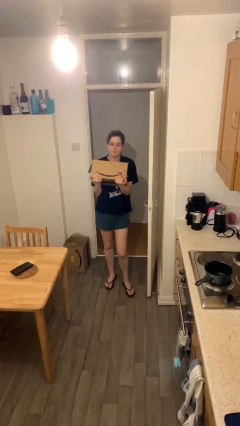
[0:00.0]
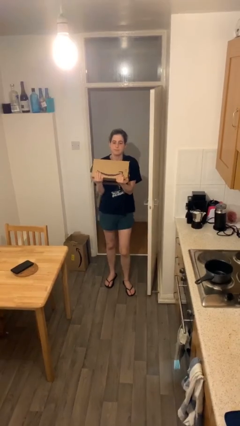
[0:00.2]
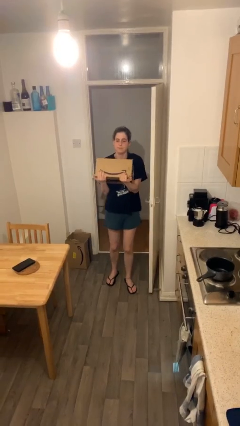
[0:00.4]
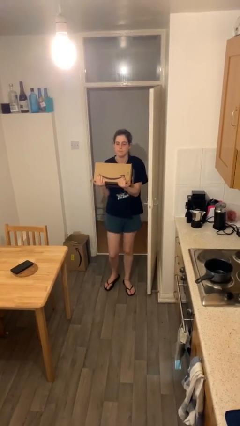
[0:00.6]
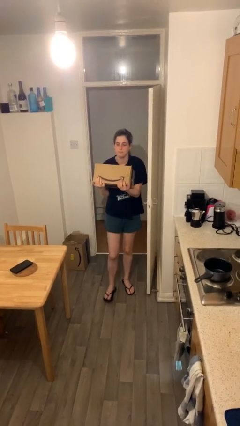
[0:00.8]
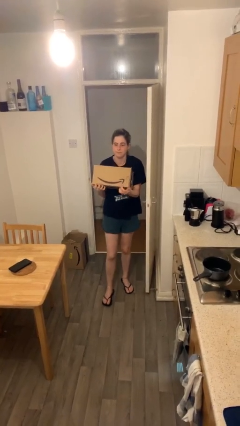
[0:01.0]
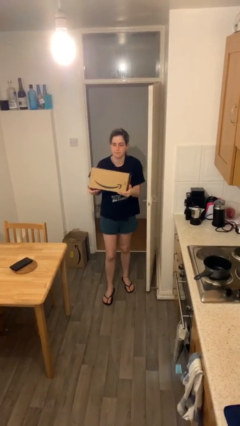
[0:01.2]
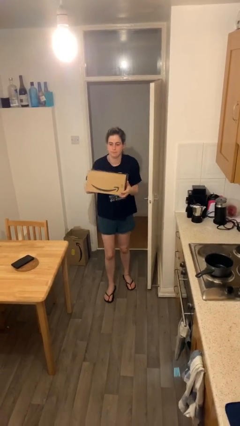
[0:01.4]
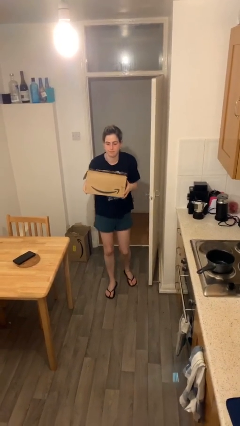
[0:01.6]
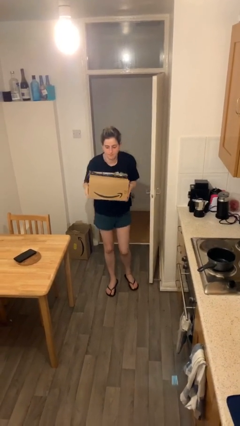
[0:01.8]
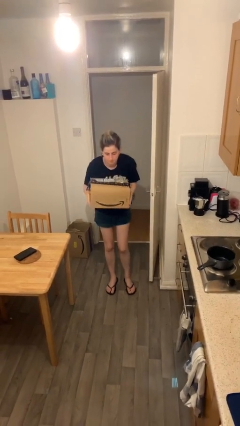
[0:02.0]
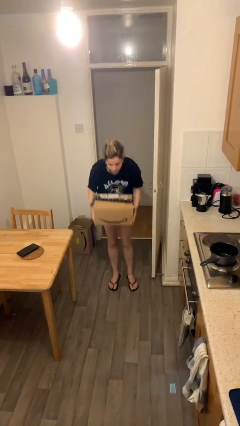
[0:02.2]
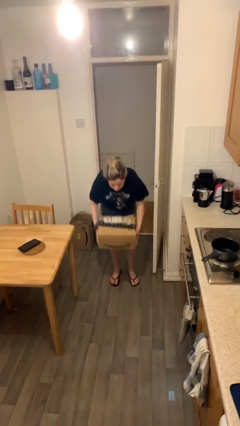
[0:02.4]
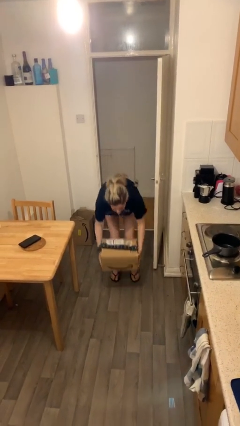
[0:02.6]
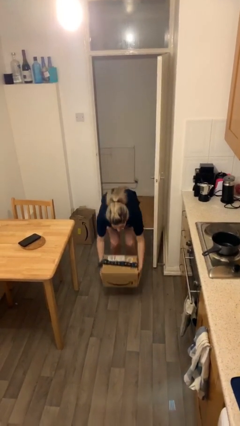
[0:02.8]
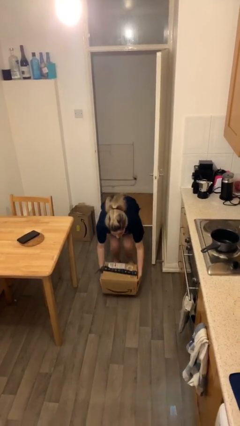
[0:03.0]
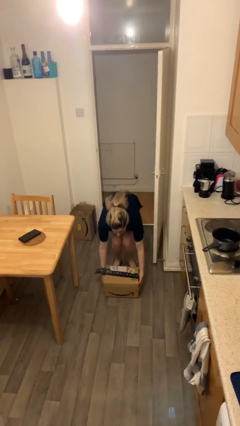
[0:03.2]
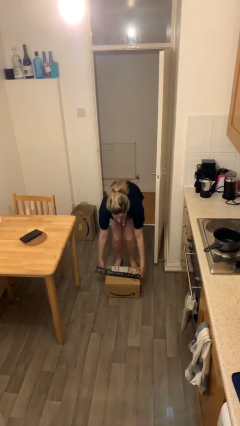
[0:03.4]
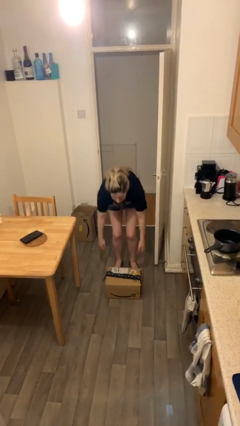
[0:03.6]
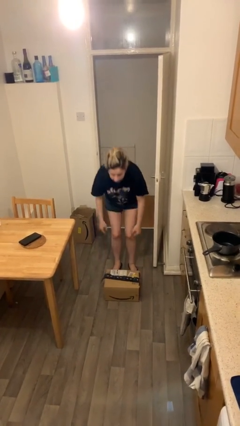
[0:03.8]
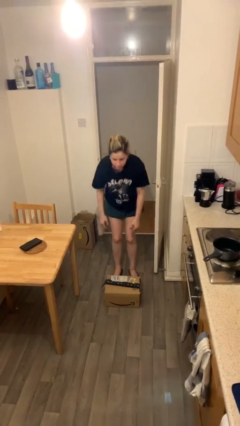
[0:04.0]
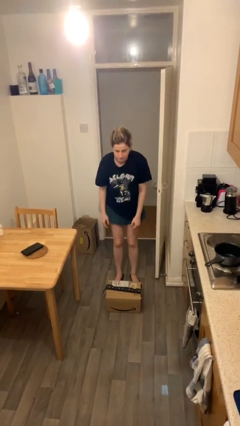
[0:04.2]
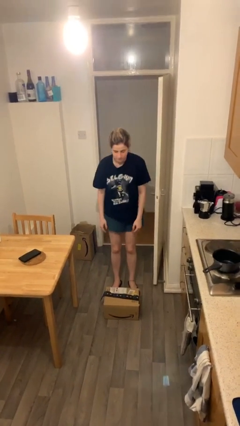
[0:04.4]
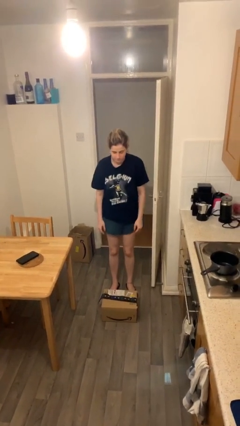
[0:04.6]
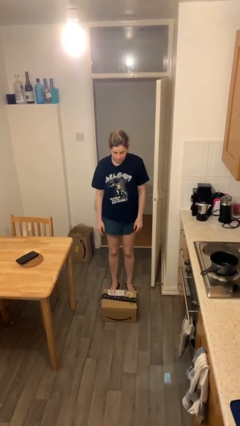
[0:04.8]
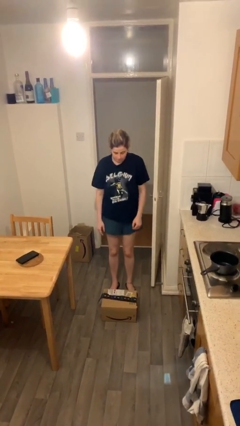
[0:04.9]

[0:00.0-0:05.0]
person puts down object on floor

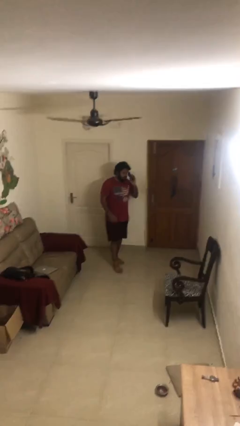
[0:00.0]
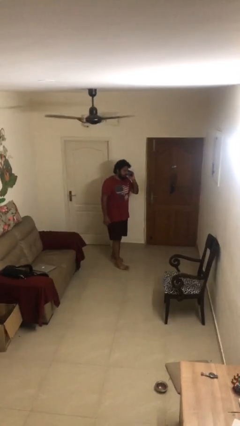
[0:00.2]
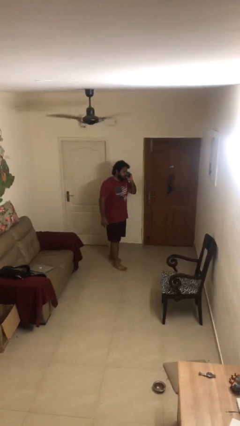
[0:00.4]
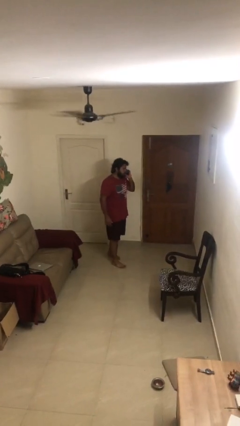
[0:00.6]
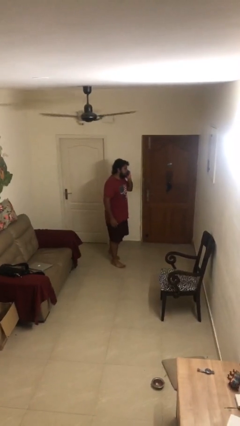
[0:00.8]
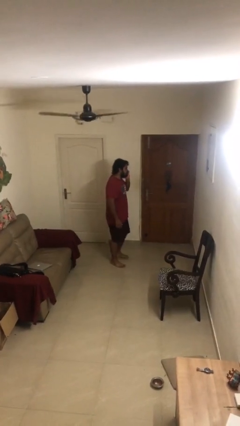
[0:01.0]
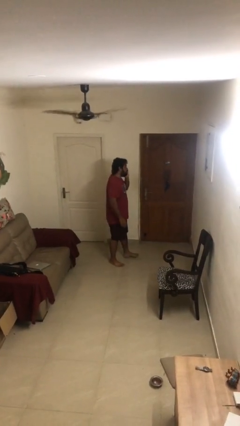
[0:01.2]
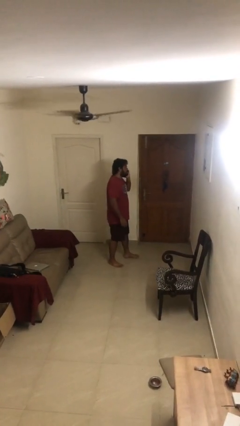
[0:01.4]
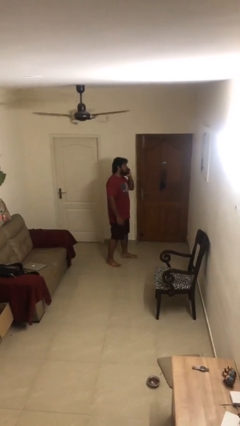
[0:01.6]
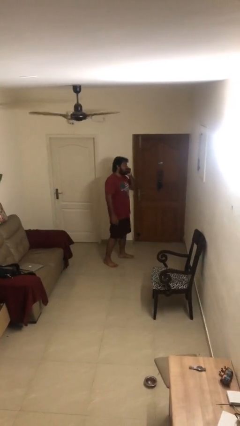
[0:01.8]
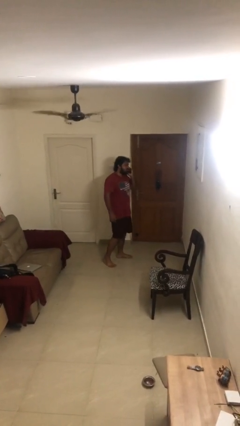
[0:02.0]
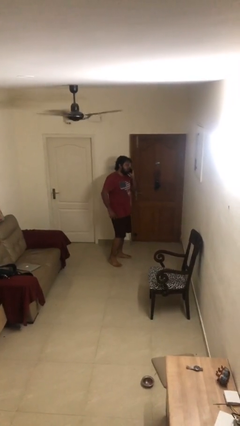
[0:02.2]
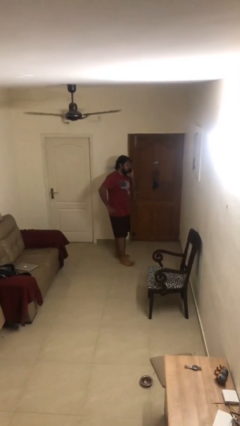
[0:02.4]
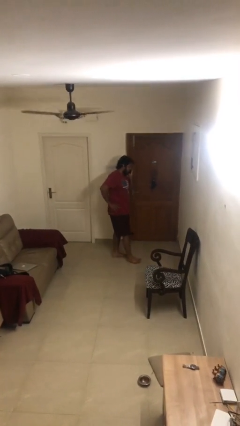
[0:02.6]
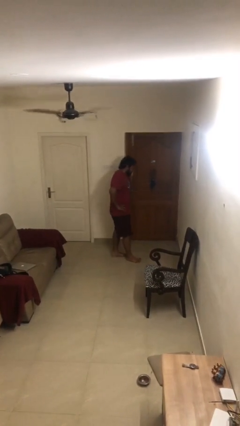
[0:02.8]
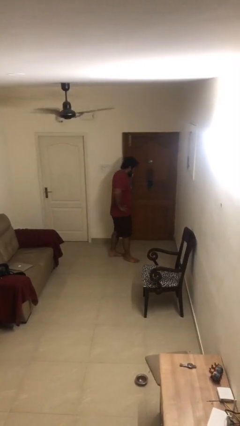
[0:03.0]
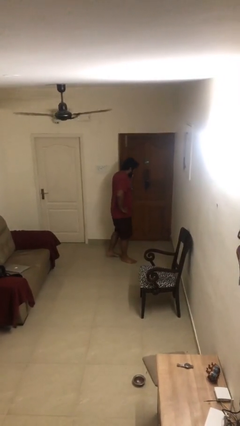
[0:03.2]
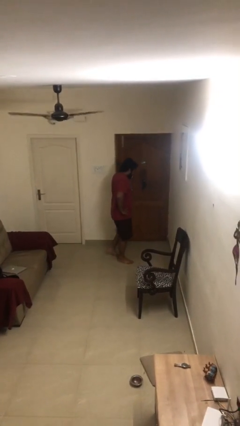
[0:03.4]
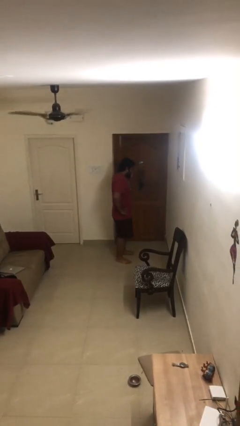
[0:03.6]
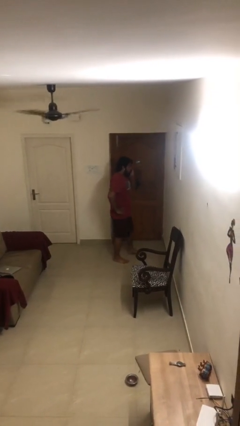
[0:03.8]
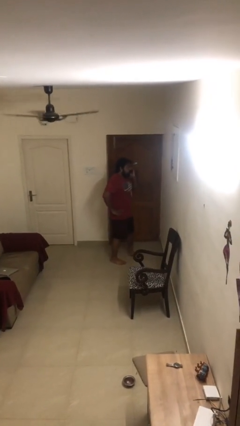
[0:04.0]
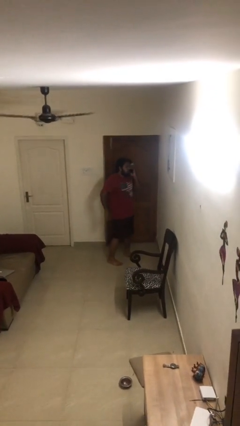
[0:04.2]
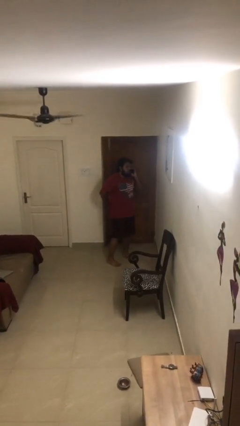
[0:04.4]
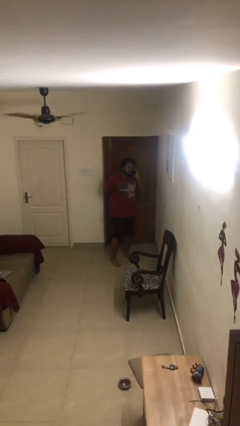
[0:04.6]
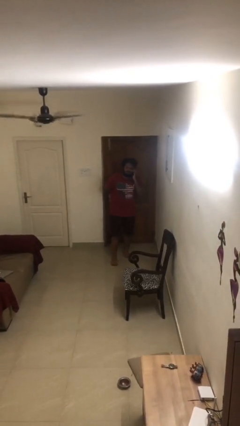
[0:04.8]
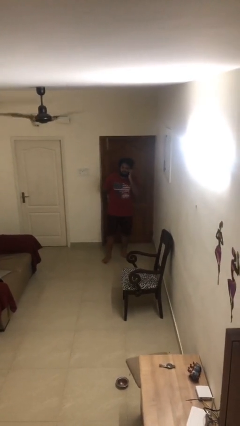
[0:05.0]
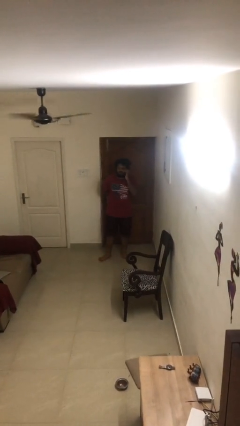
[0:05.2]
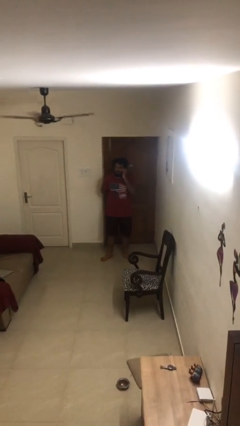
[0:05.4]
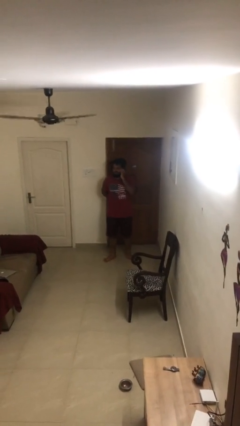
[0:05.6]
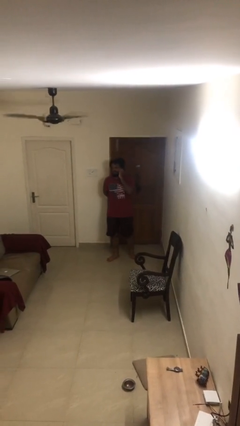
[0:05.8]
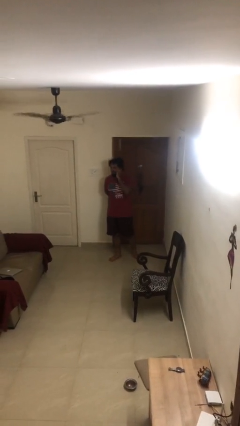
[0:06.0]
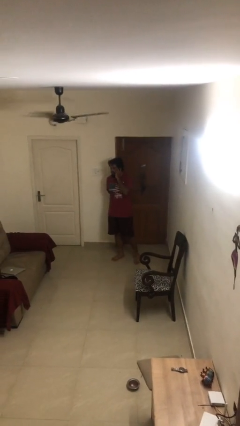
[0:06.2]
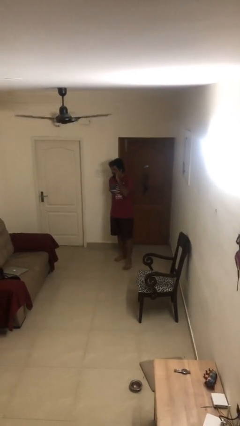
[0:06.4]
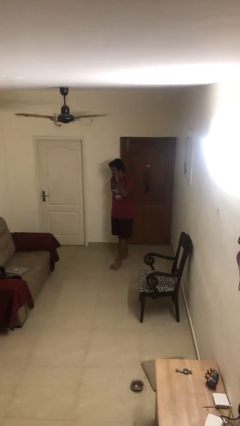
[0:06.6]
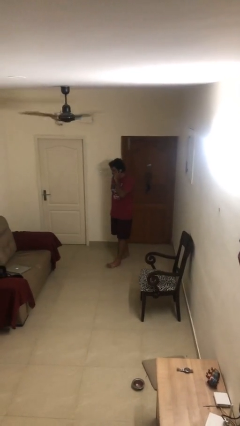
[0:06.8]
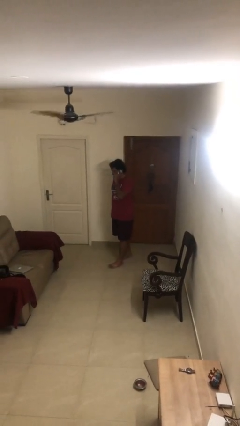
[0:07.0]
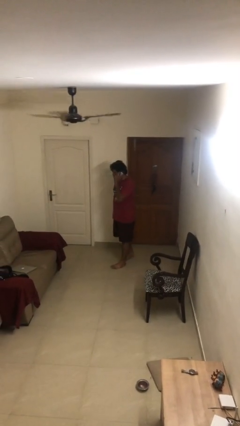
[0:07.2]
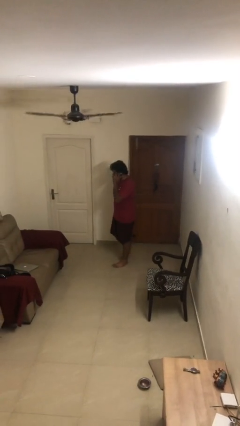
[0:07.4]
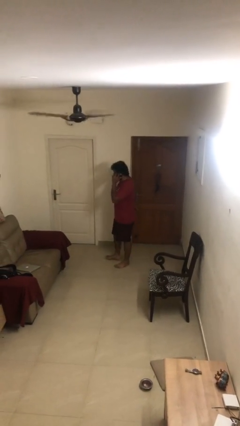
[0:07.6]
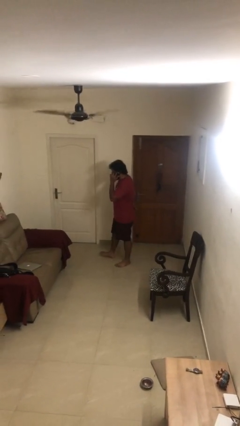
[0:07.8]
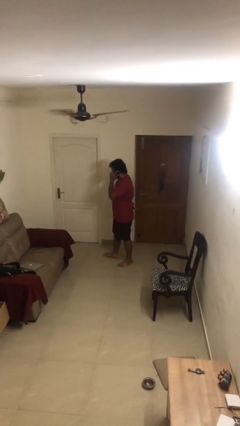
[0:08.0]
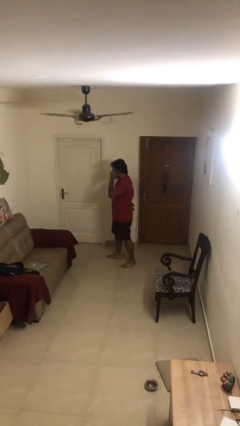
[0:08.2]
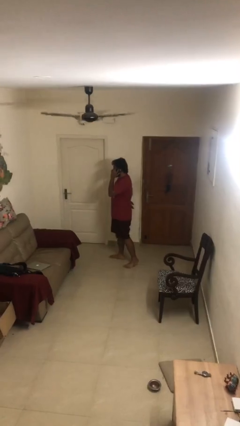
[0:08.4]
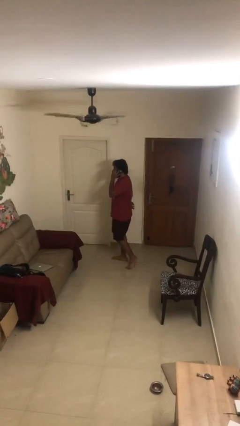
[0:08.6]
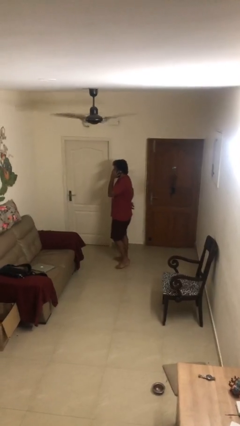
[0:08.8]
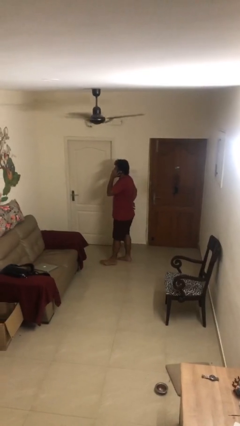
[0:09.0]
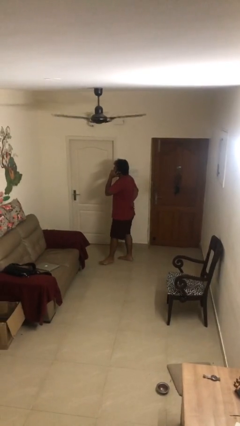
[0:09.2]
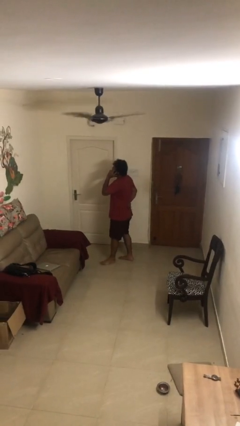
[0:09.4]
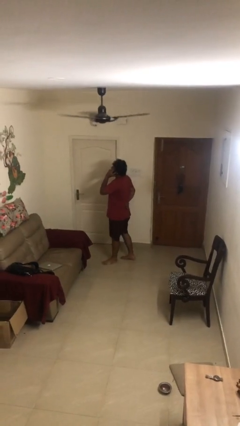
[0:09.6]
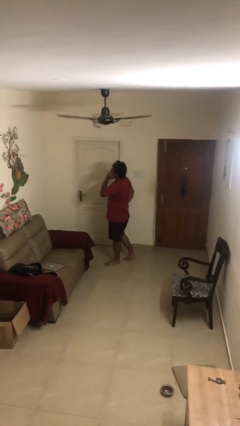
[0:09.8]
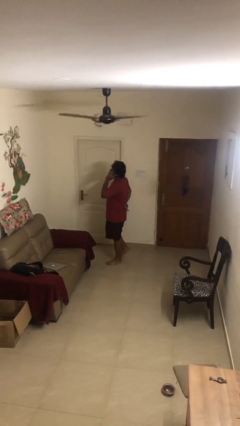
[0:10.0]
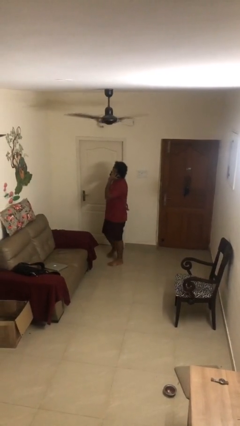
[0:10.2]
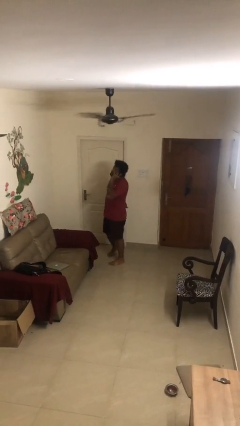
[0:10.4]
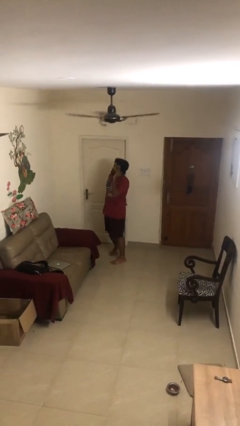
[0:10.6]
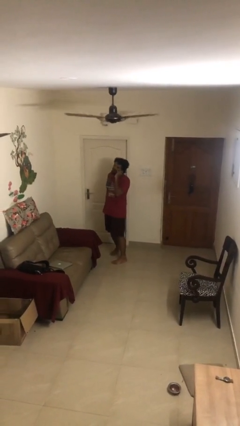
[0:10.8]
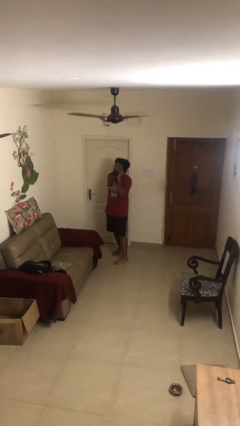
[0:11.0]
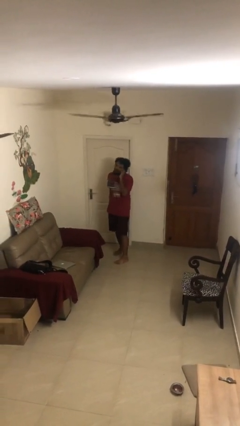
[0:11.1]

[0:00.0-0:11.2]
person talks on phone

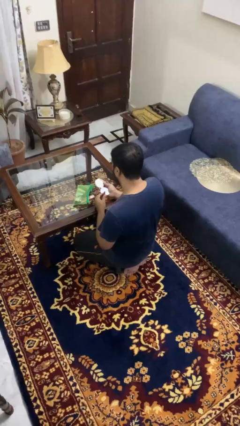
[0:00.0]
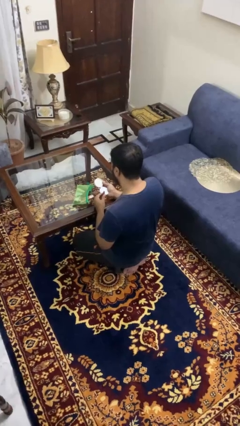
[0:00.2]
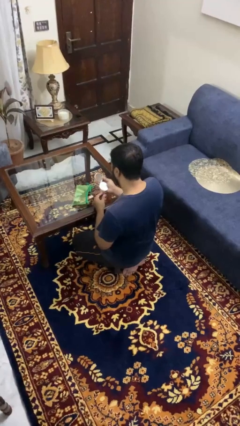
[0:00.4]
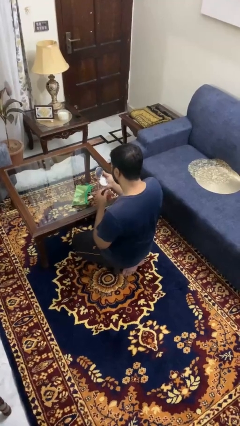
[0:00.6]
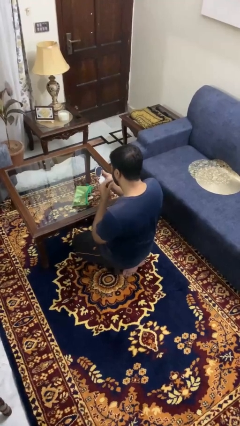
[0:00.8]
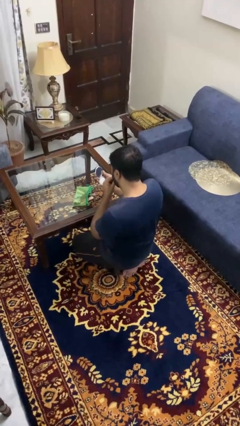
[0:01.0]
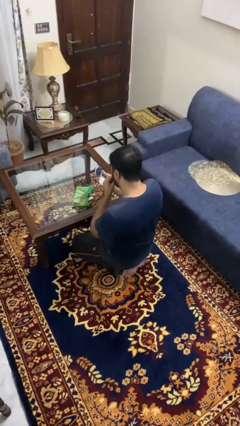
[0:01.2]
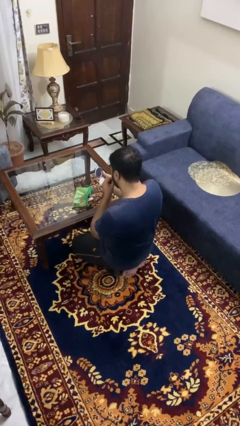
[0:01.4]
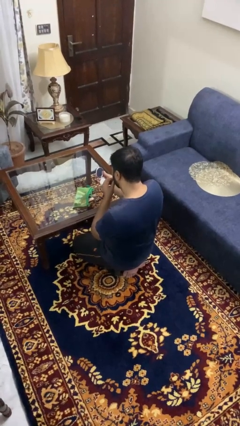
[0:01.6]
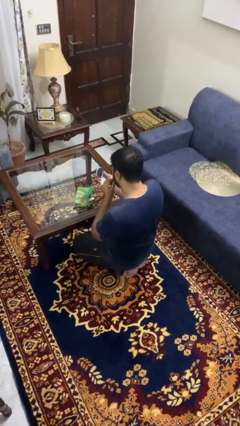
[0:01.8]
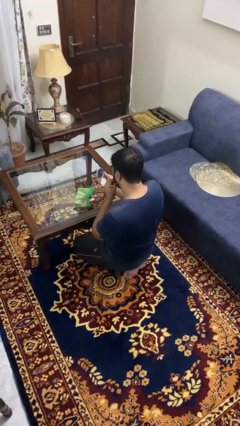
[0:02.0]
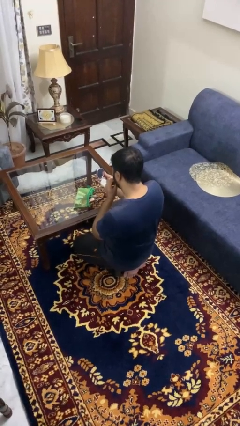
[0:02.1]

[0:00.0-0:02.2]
person applies lip makeup
